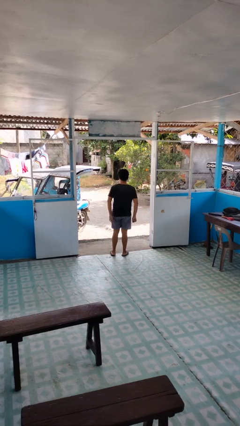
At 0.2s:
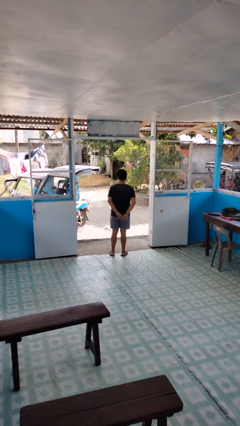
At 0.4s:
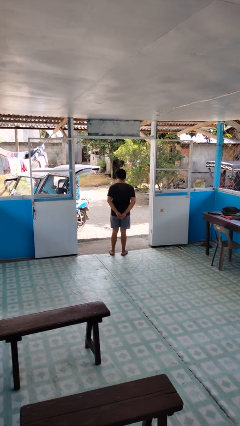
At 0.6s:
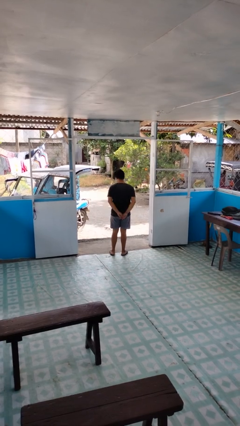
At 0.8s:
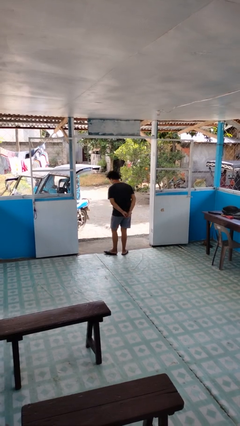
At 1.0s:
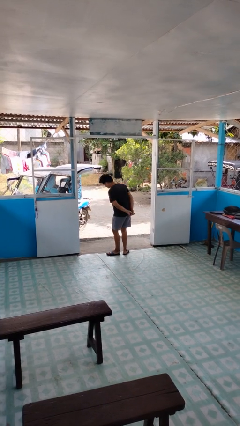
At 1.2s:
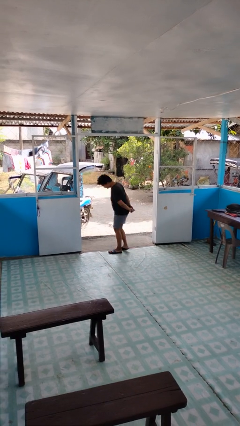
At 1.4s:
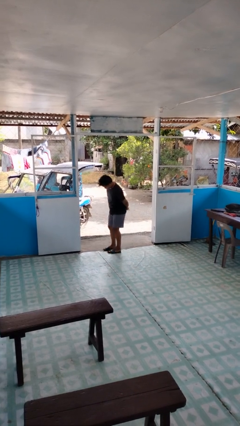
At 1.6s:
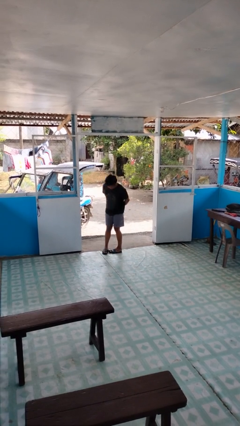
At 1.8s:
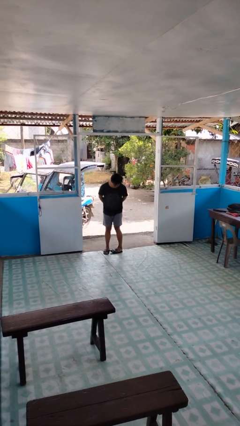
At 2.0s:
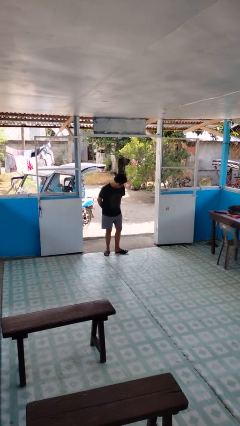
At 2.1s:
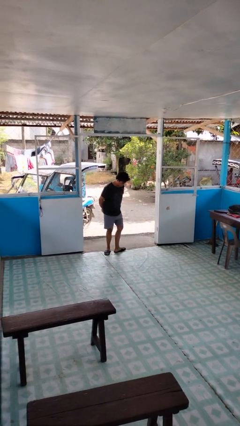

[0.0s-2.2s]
person twirls

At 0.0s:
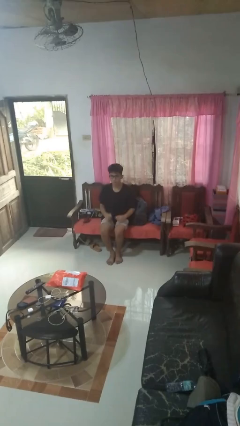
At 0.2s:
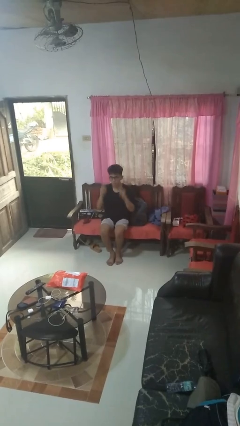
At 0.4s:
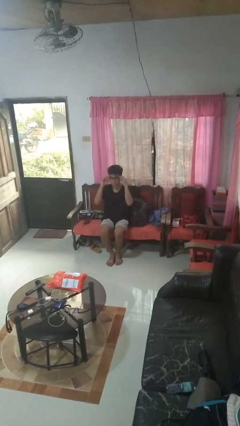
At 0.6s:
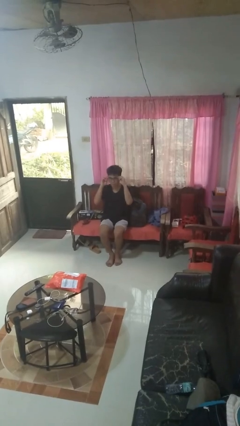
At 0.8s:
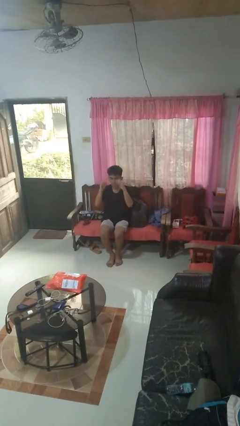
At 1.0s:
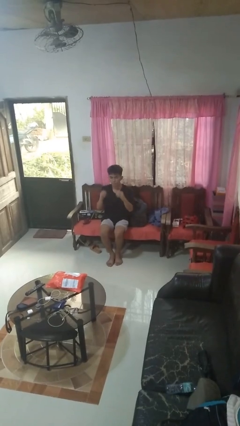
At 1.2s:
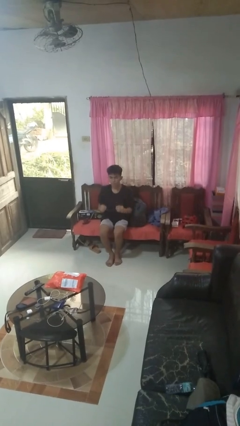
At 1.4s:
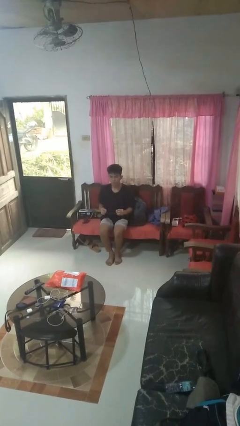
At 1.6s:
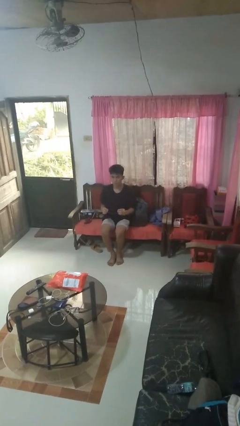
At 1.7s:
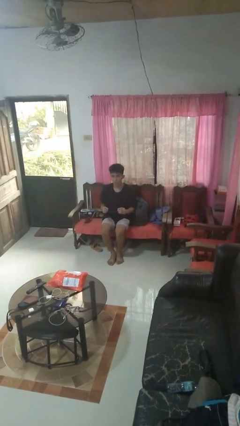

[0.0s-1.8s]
person takes off glasses

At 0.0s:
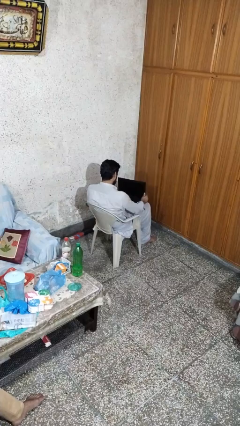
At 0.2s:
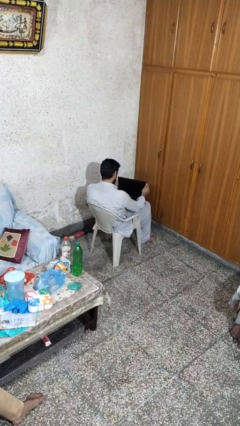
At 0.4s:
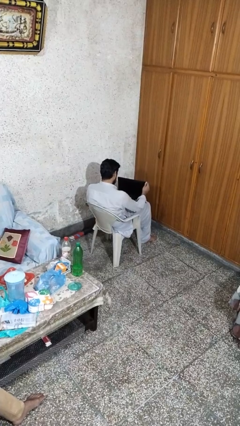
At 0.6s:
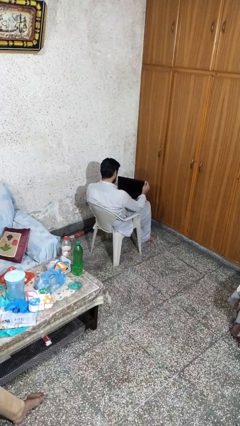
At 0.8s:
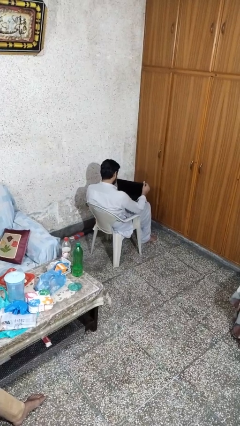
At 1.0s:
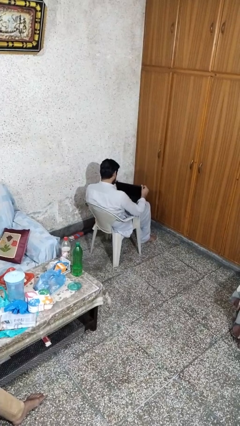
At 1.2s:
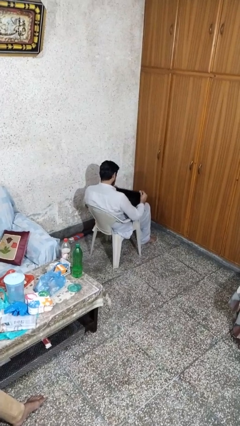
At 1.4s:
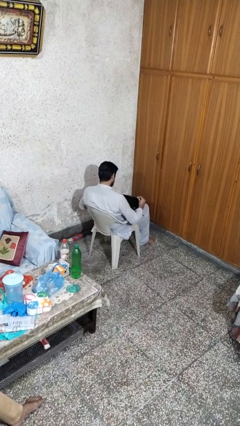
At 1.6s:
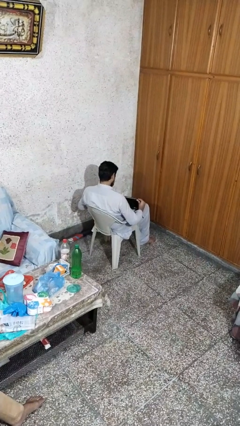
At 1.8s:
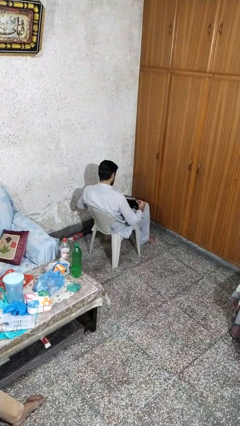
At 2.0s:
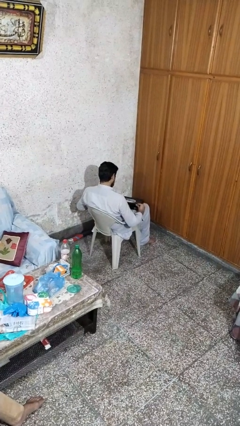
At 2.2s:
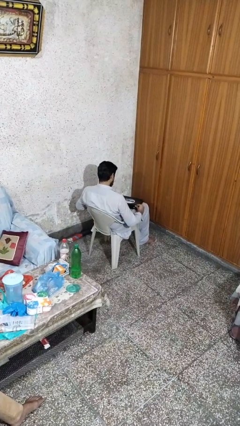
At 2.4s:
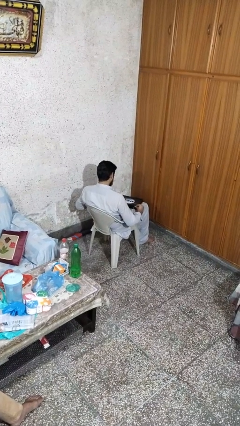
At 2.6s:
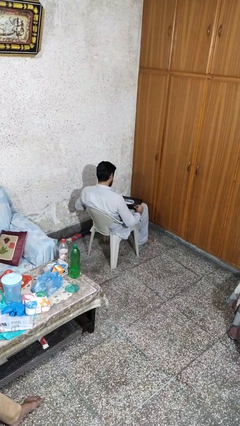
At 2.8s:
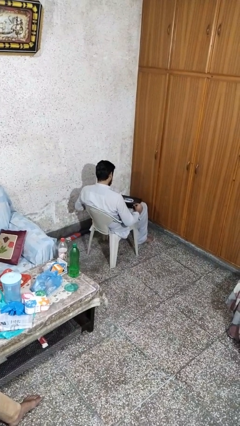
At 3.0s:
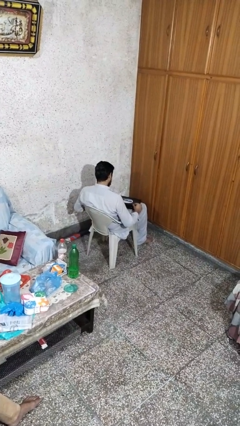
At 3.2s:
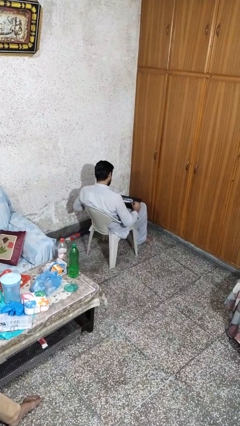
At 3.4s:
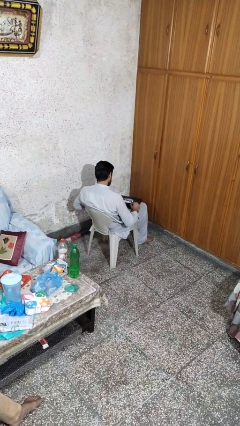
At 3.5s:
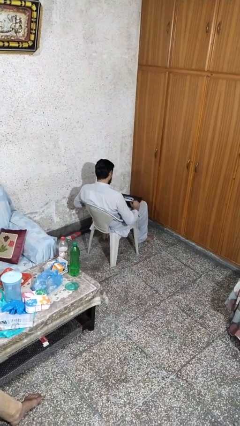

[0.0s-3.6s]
person closes laptop

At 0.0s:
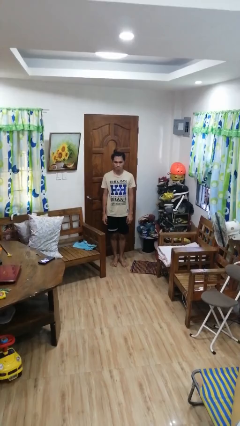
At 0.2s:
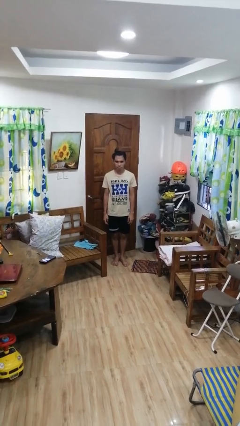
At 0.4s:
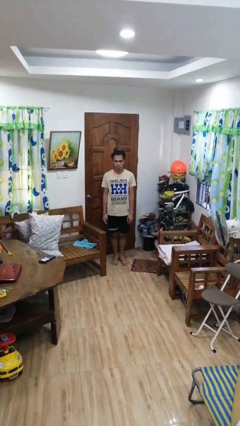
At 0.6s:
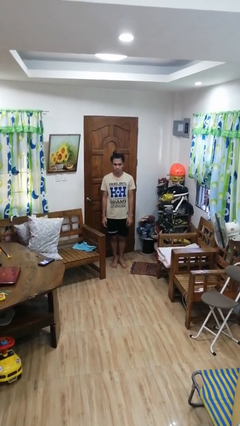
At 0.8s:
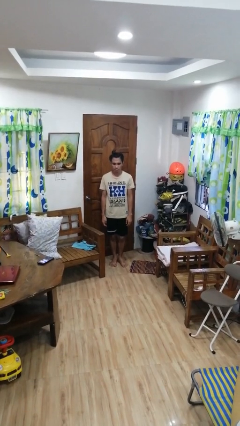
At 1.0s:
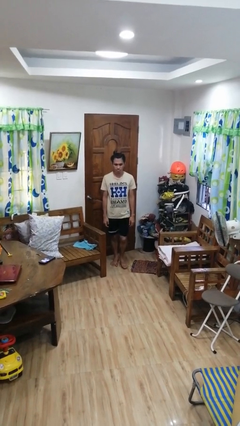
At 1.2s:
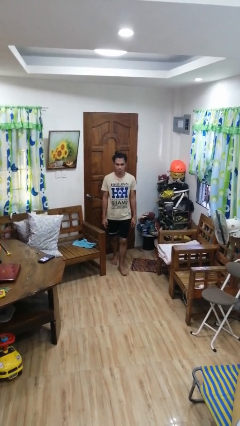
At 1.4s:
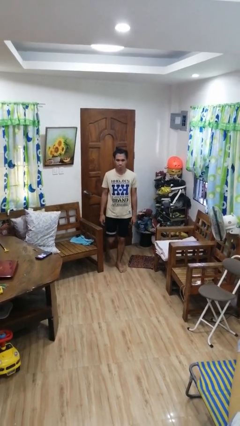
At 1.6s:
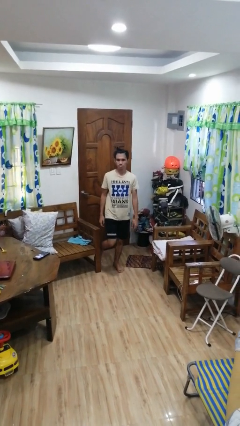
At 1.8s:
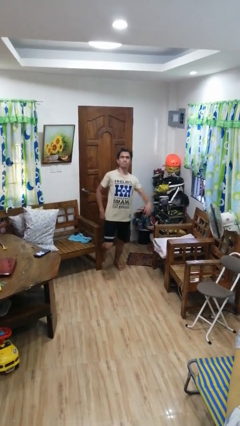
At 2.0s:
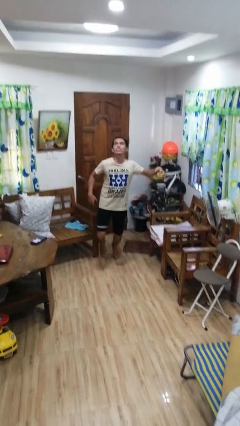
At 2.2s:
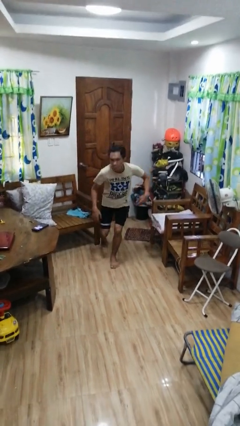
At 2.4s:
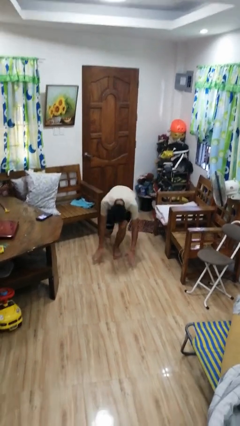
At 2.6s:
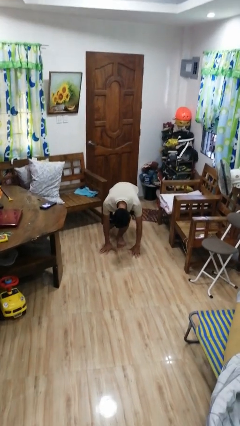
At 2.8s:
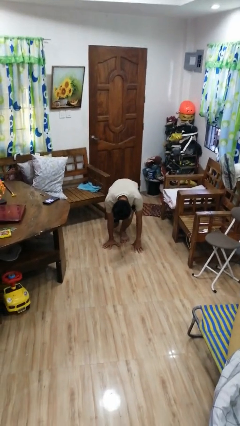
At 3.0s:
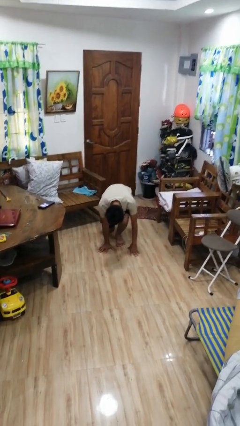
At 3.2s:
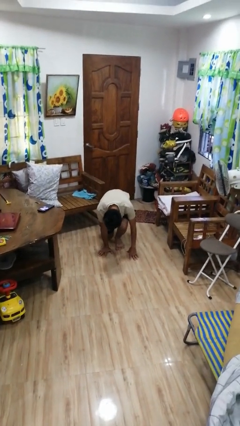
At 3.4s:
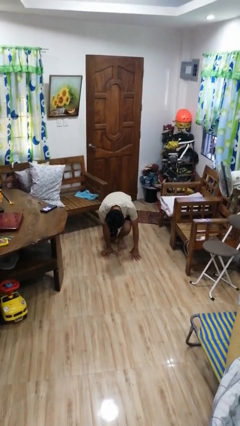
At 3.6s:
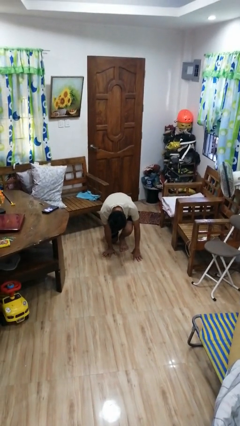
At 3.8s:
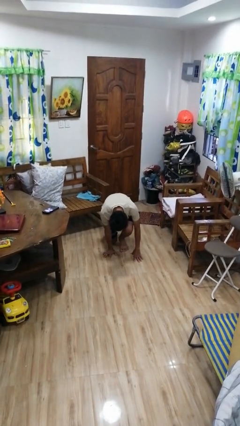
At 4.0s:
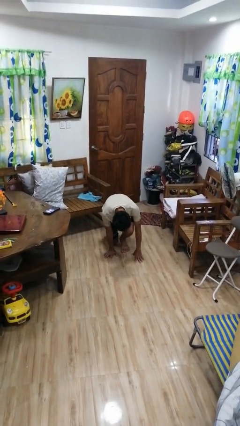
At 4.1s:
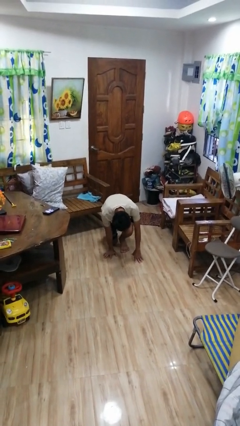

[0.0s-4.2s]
person trips on object on floor

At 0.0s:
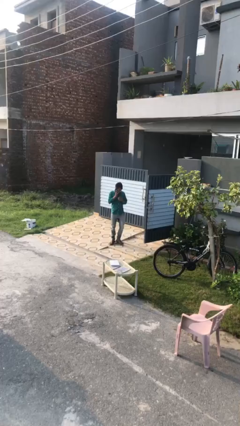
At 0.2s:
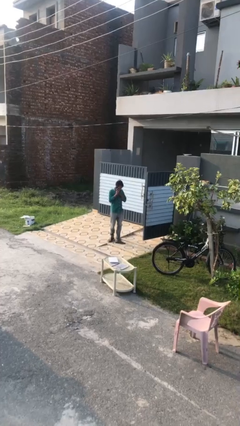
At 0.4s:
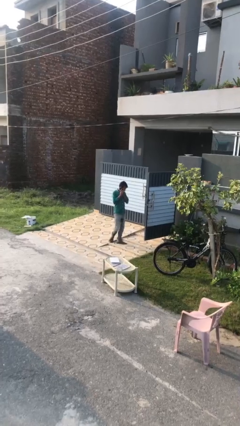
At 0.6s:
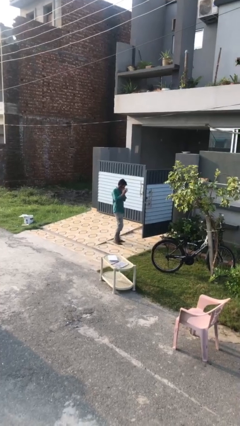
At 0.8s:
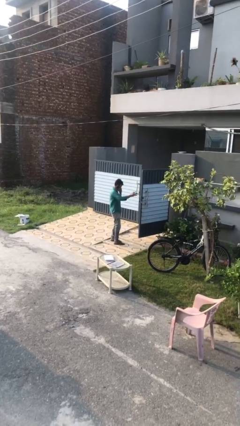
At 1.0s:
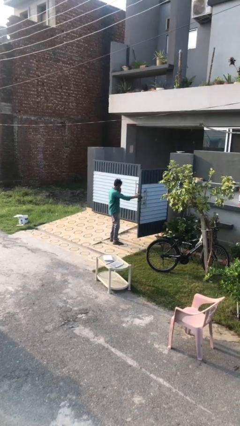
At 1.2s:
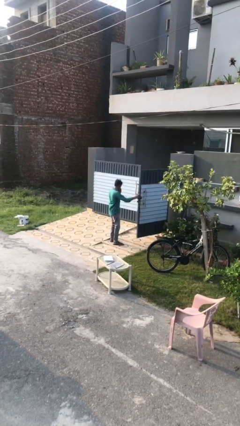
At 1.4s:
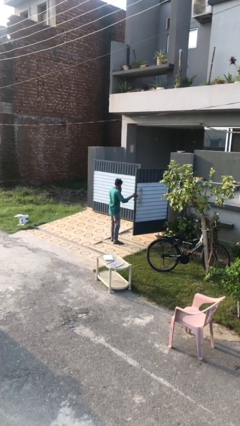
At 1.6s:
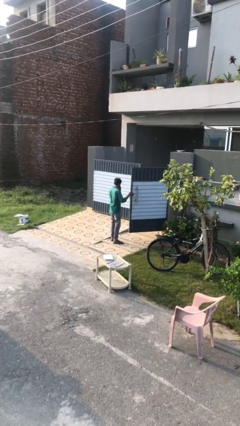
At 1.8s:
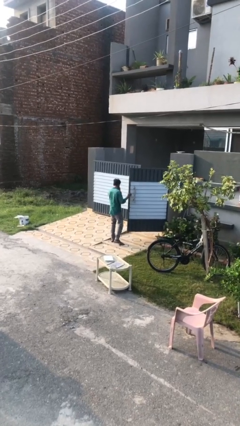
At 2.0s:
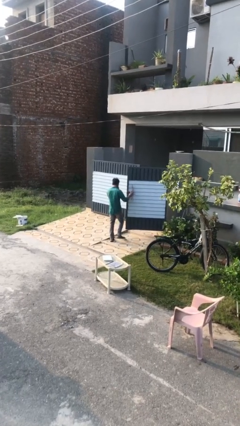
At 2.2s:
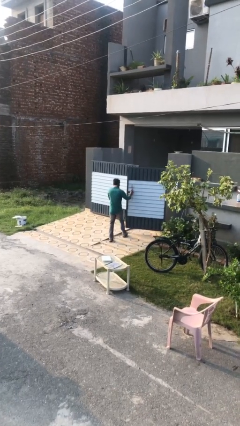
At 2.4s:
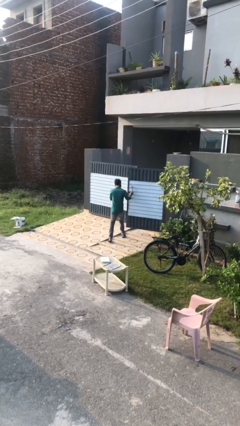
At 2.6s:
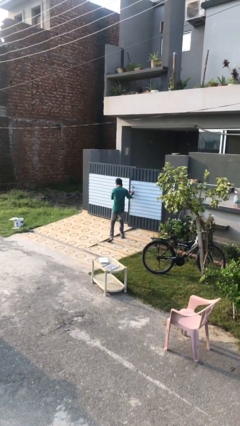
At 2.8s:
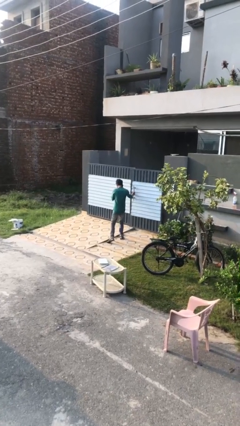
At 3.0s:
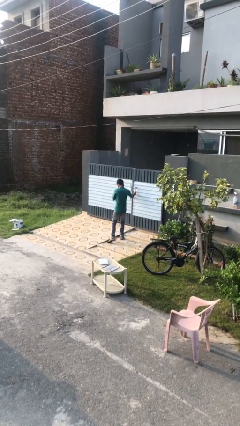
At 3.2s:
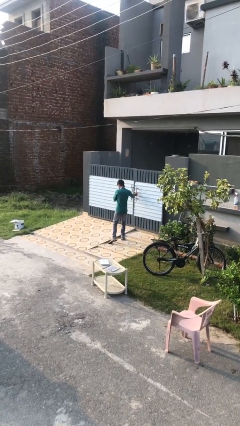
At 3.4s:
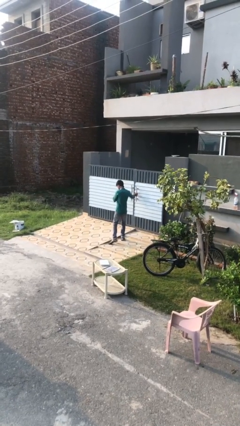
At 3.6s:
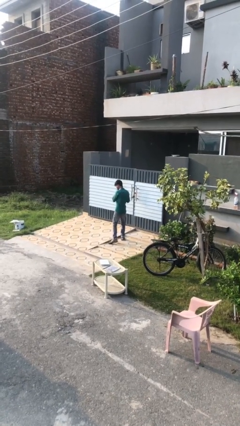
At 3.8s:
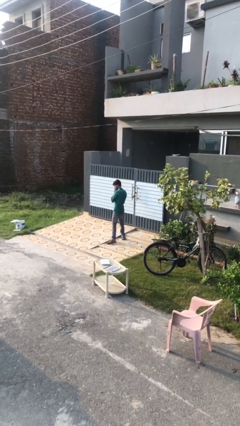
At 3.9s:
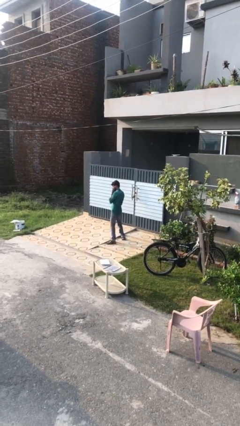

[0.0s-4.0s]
person closes facility door

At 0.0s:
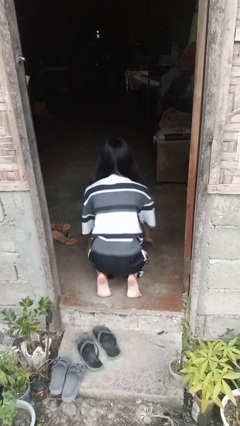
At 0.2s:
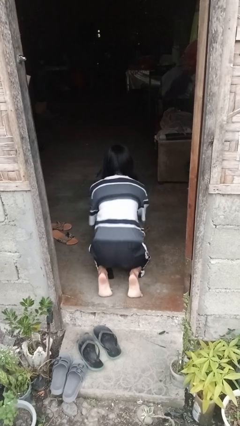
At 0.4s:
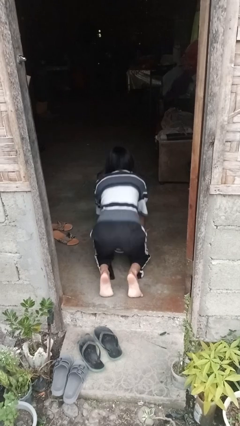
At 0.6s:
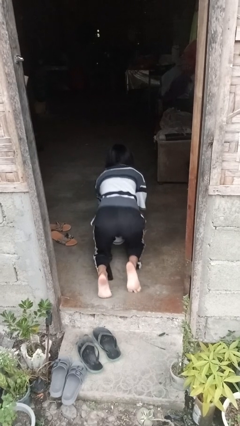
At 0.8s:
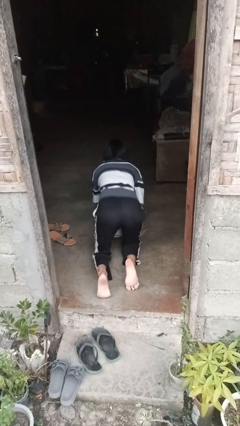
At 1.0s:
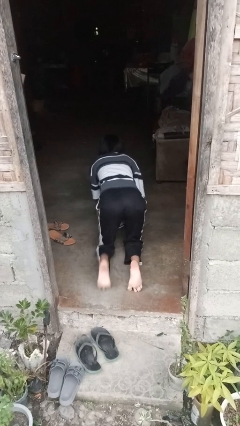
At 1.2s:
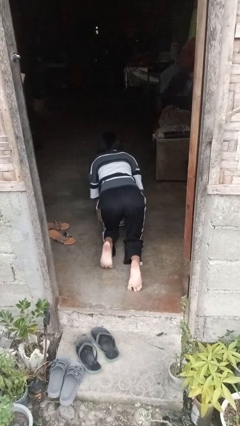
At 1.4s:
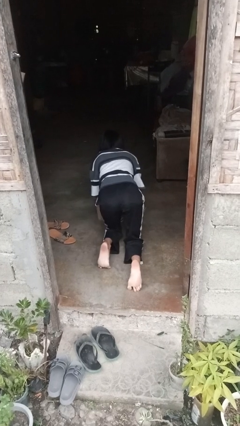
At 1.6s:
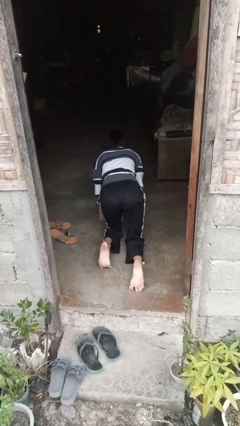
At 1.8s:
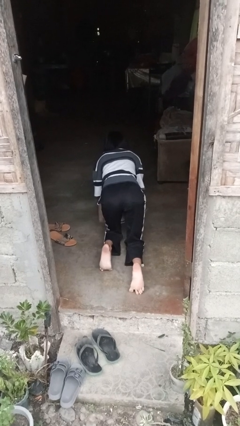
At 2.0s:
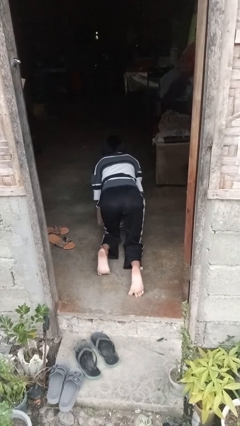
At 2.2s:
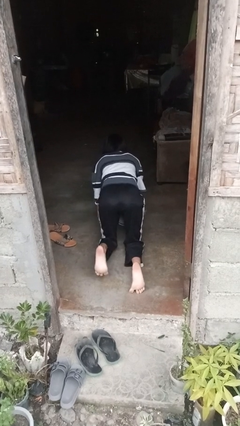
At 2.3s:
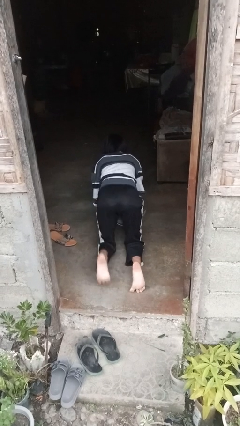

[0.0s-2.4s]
person crawls
